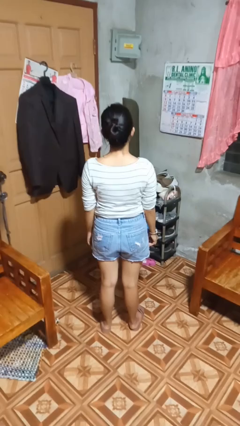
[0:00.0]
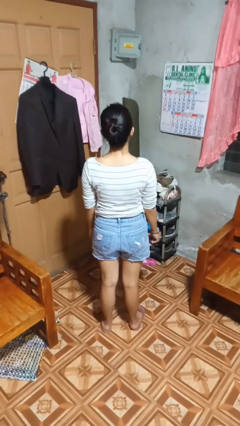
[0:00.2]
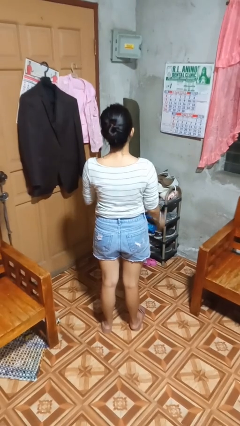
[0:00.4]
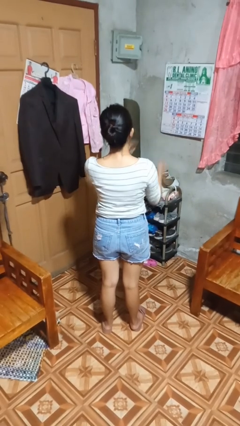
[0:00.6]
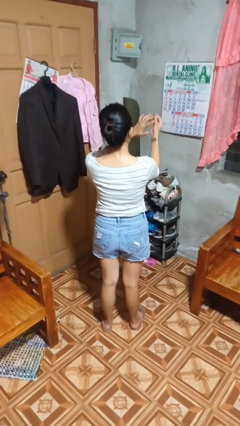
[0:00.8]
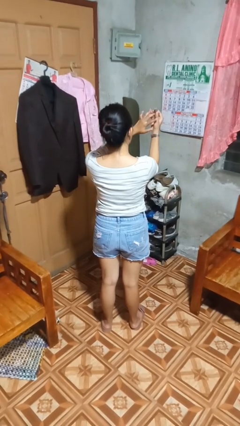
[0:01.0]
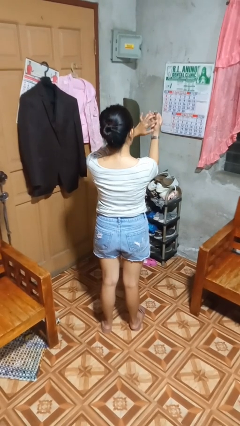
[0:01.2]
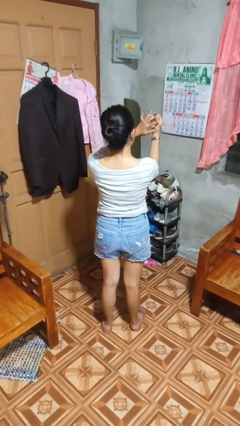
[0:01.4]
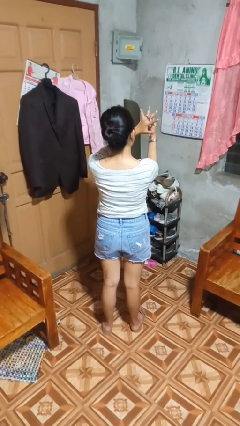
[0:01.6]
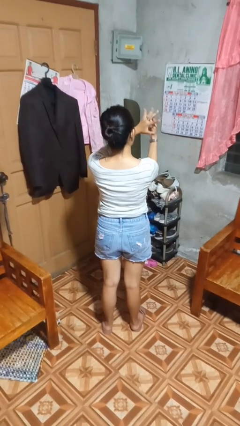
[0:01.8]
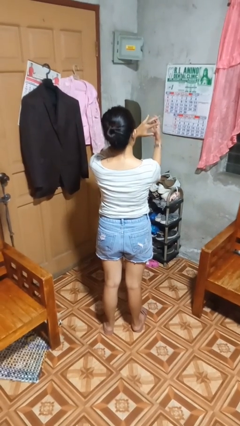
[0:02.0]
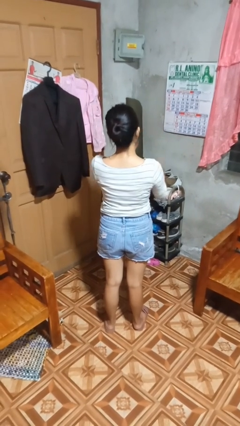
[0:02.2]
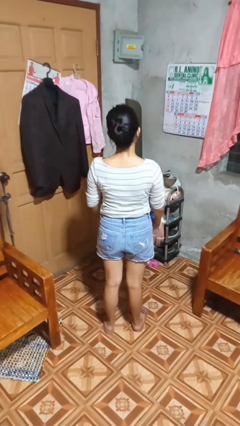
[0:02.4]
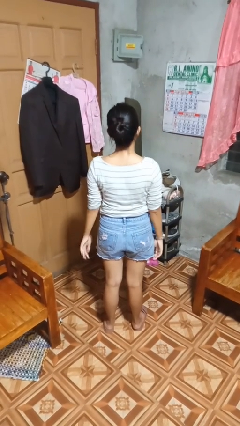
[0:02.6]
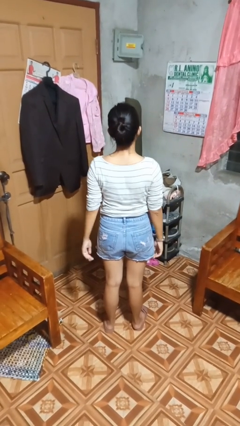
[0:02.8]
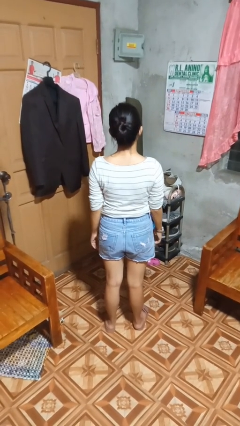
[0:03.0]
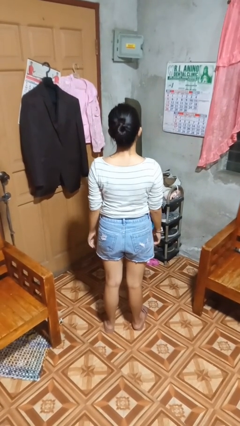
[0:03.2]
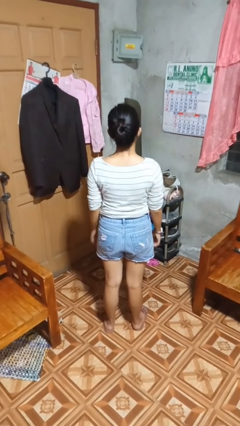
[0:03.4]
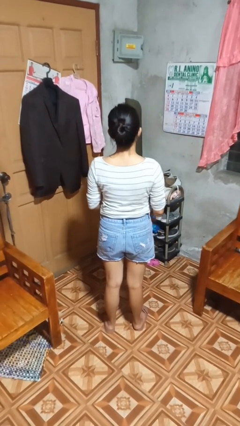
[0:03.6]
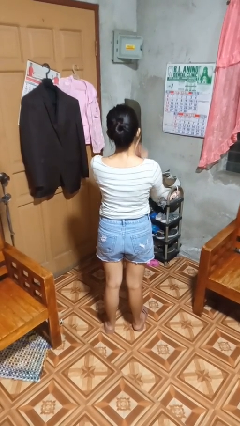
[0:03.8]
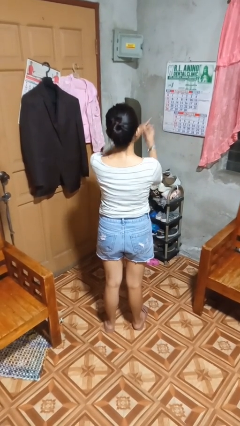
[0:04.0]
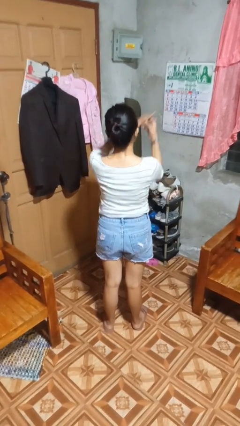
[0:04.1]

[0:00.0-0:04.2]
person puts on ring

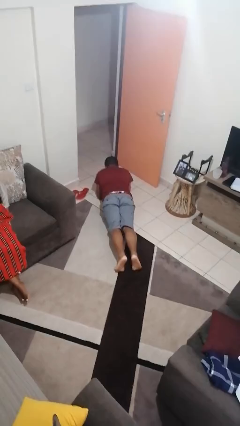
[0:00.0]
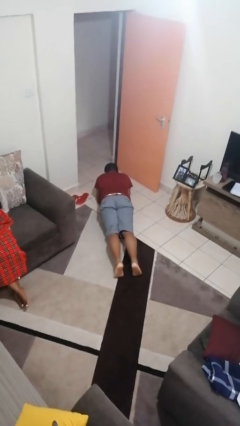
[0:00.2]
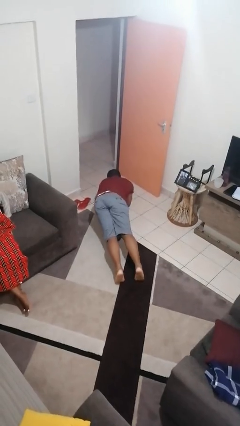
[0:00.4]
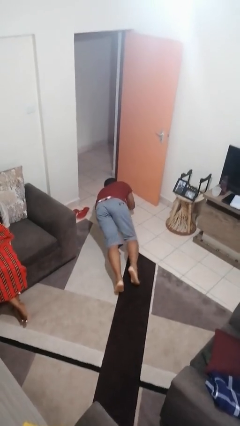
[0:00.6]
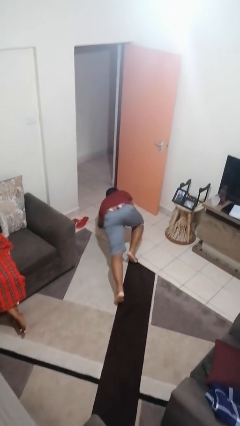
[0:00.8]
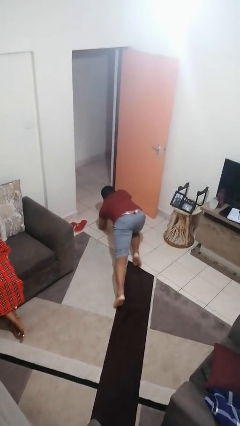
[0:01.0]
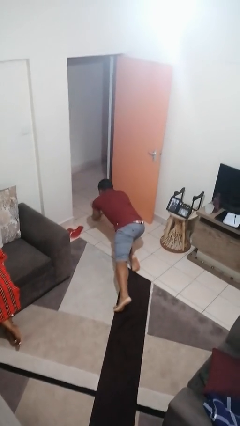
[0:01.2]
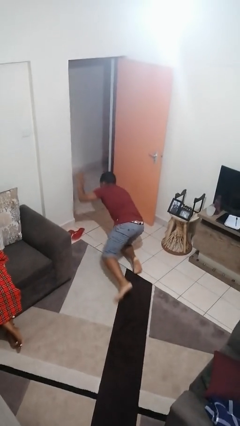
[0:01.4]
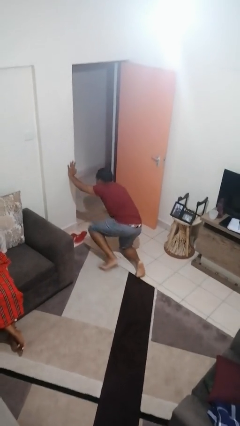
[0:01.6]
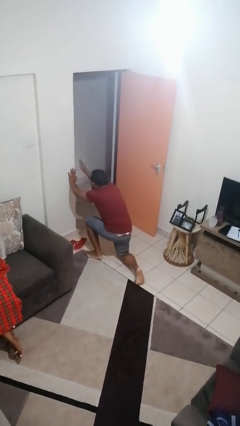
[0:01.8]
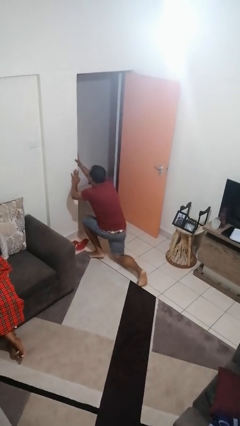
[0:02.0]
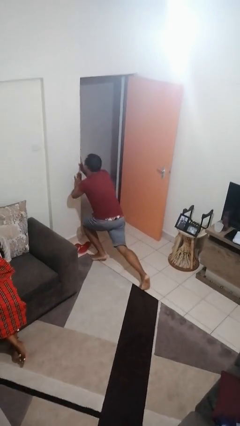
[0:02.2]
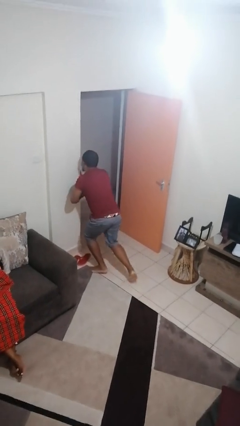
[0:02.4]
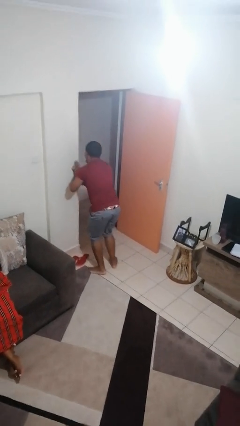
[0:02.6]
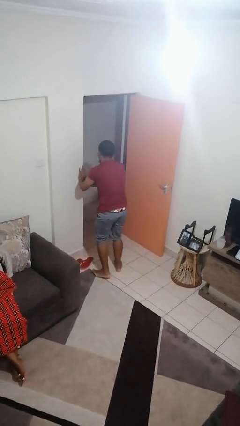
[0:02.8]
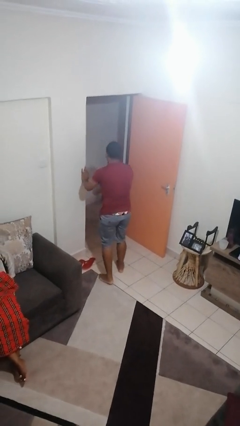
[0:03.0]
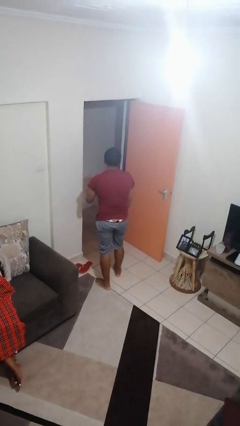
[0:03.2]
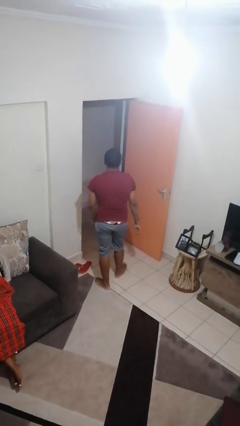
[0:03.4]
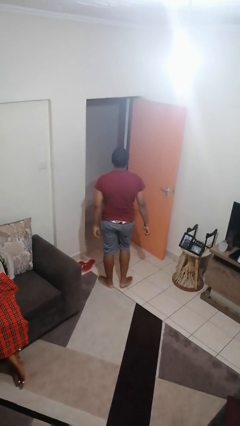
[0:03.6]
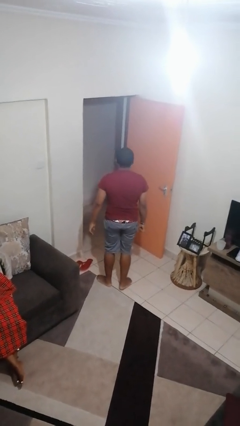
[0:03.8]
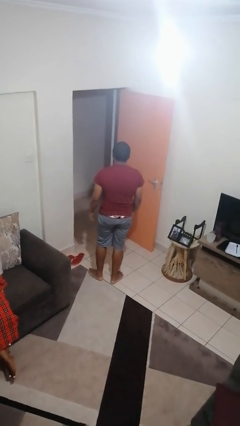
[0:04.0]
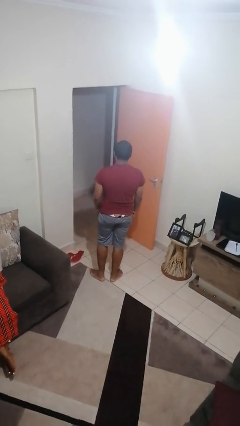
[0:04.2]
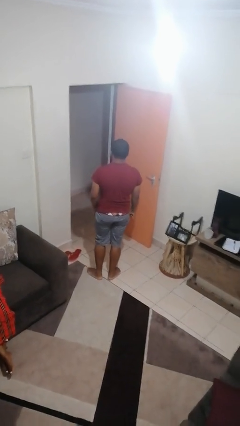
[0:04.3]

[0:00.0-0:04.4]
person stands up from floor

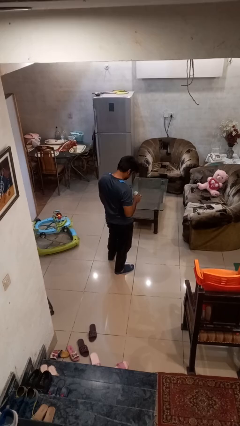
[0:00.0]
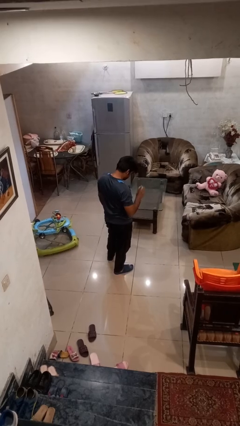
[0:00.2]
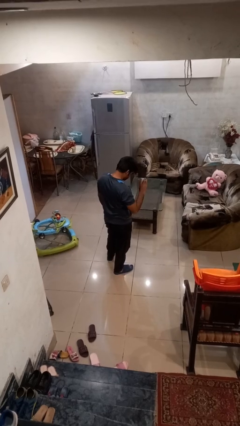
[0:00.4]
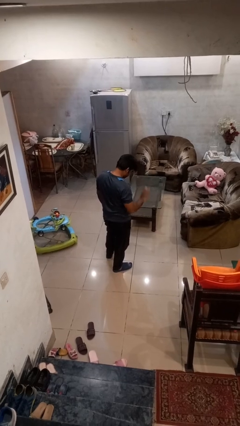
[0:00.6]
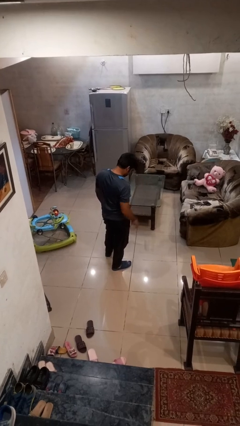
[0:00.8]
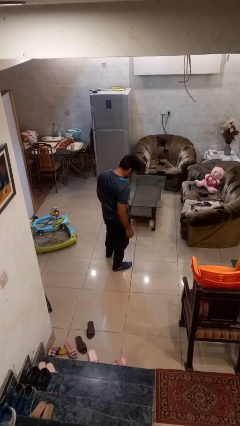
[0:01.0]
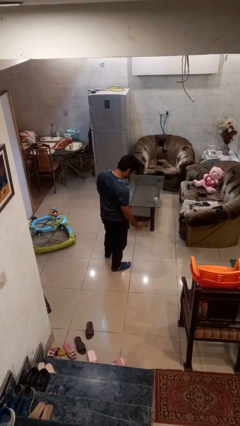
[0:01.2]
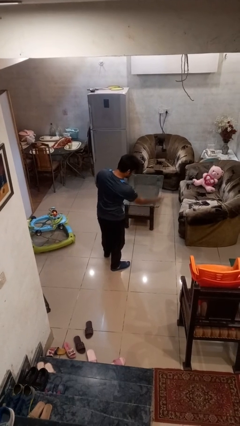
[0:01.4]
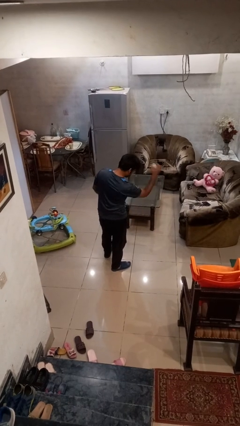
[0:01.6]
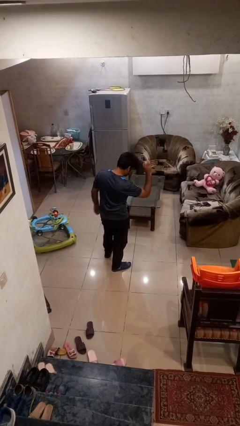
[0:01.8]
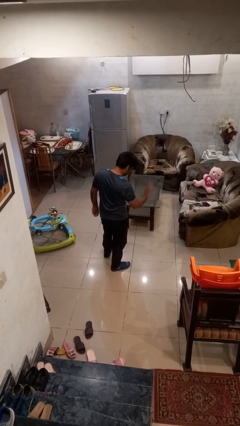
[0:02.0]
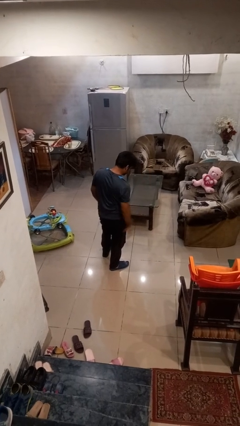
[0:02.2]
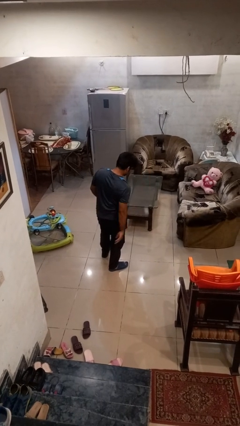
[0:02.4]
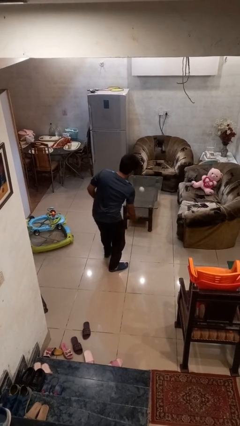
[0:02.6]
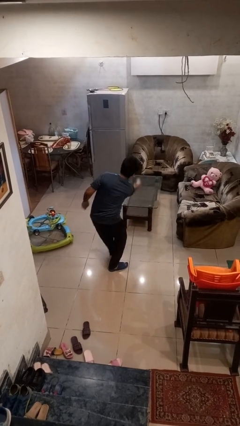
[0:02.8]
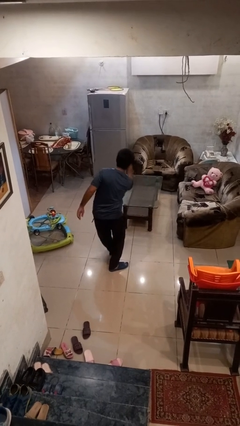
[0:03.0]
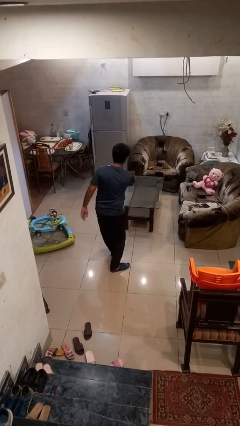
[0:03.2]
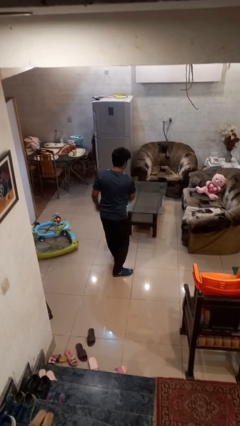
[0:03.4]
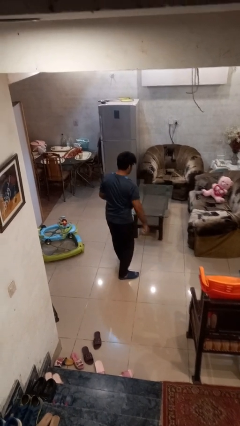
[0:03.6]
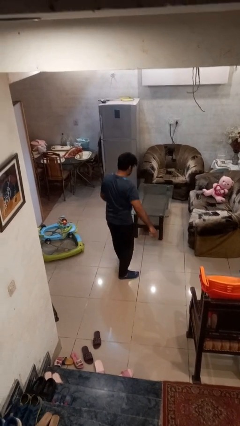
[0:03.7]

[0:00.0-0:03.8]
person bounces ball on floor

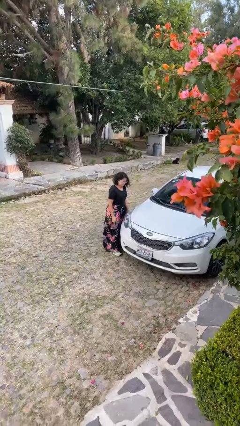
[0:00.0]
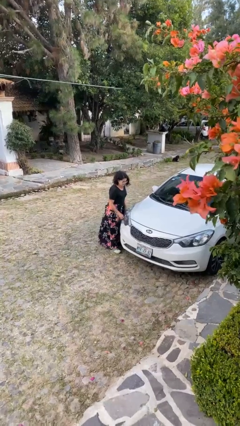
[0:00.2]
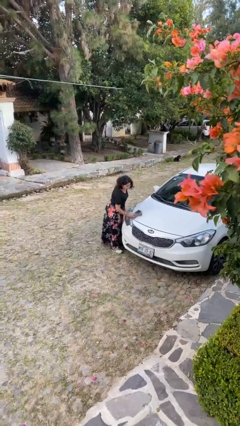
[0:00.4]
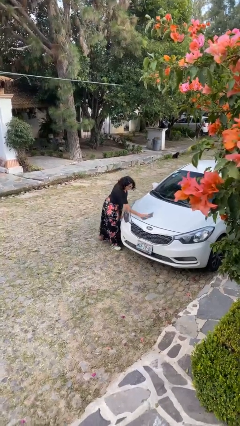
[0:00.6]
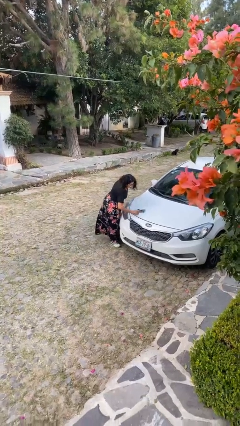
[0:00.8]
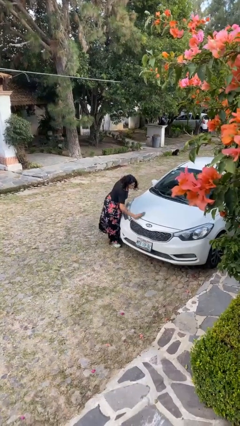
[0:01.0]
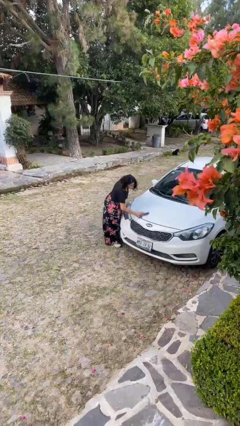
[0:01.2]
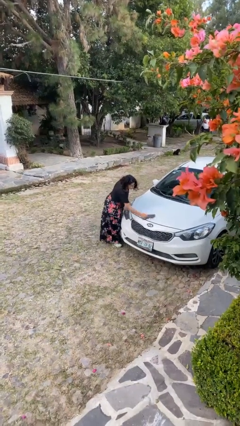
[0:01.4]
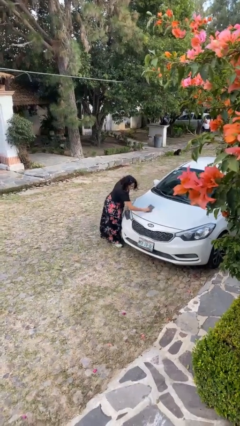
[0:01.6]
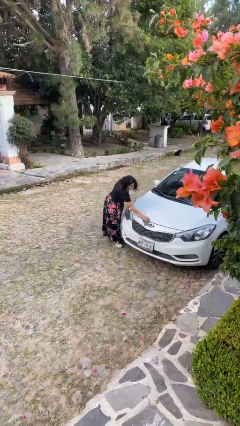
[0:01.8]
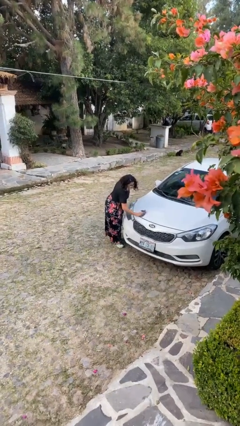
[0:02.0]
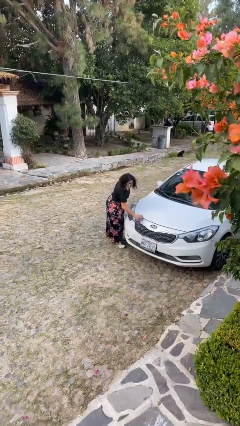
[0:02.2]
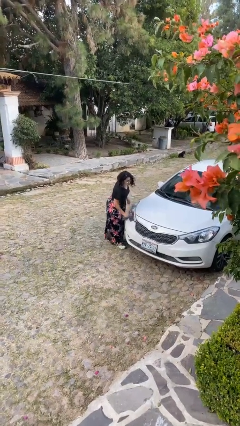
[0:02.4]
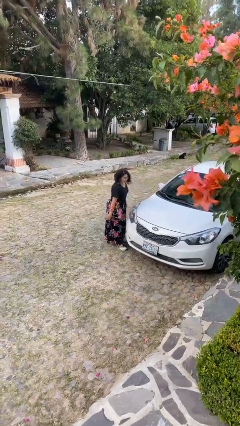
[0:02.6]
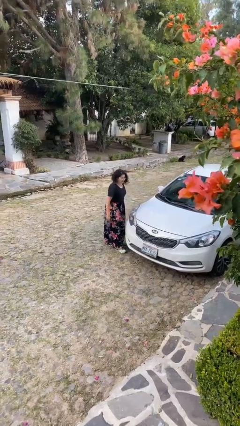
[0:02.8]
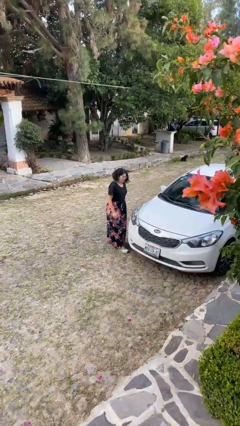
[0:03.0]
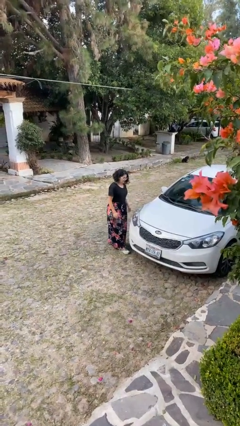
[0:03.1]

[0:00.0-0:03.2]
person polishes car with rag

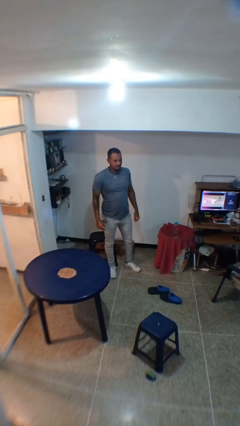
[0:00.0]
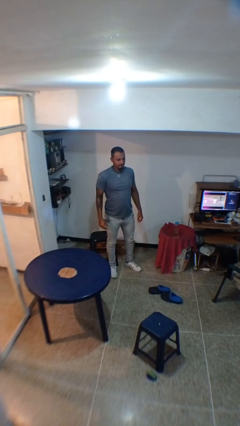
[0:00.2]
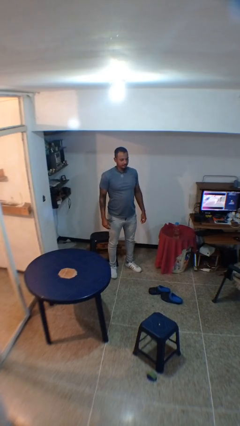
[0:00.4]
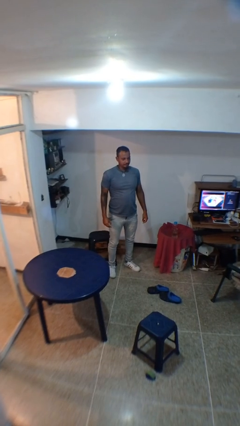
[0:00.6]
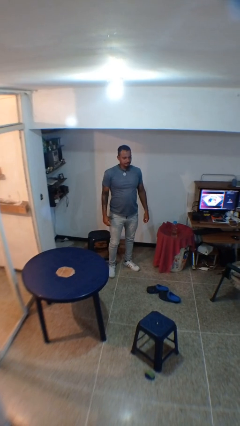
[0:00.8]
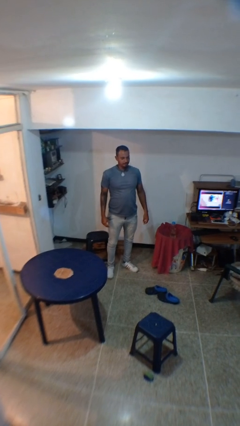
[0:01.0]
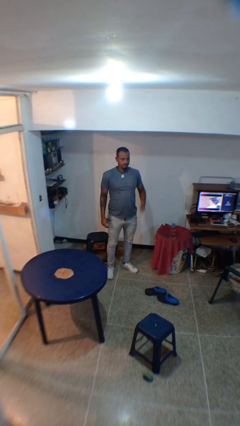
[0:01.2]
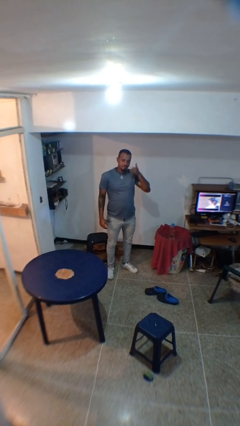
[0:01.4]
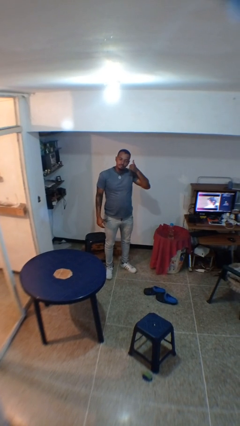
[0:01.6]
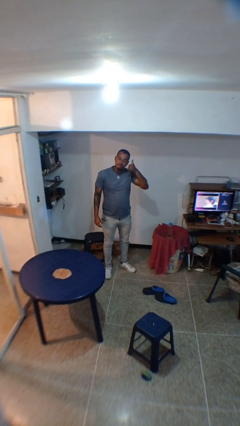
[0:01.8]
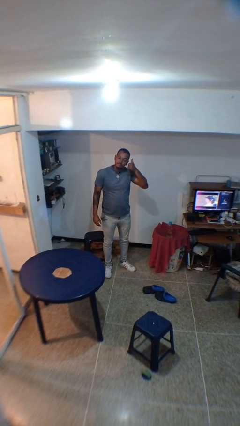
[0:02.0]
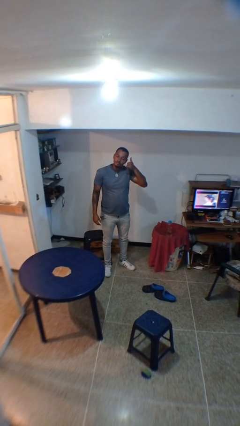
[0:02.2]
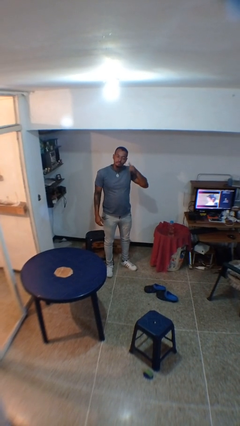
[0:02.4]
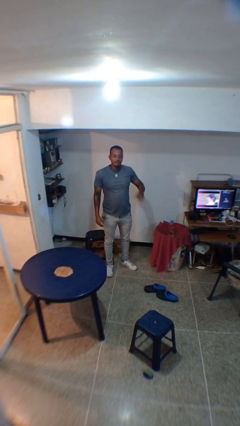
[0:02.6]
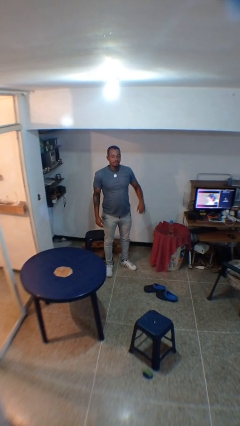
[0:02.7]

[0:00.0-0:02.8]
person gestures call me
